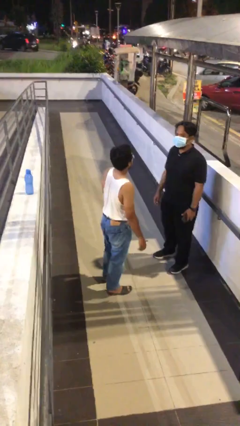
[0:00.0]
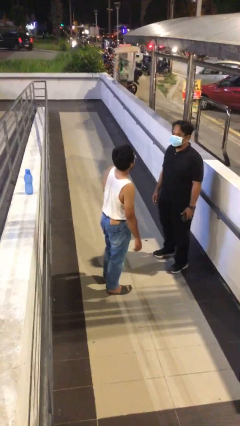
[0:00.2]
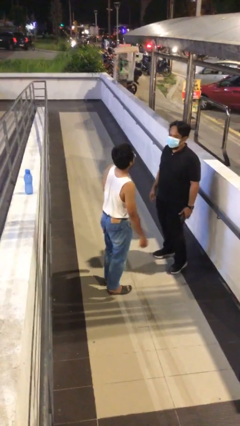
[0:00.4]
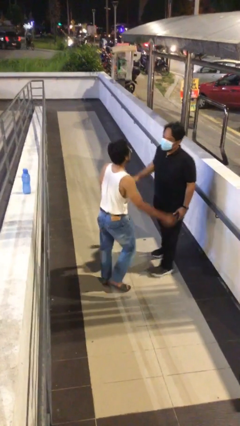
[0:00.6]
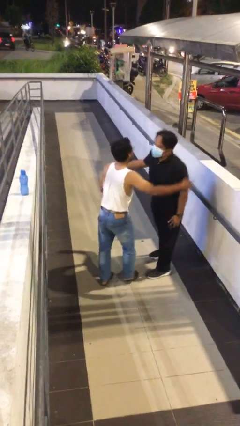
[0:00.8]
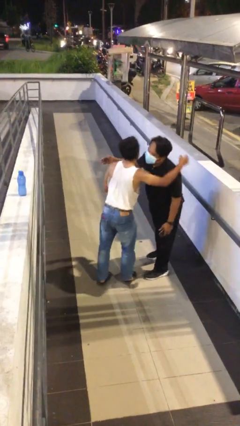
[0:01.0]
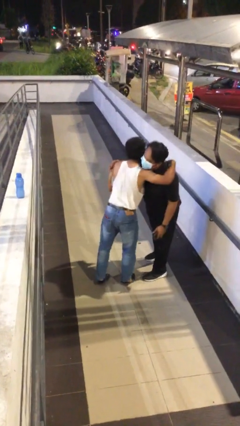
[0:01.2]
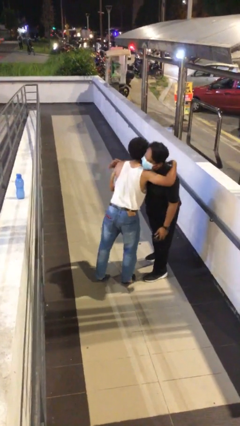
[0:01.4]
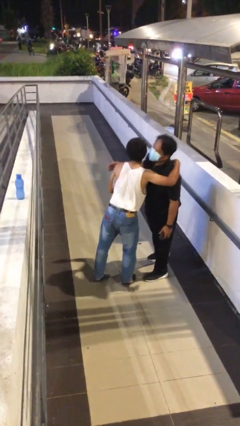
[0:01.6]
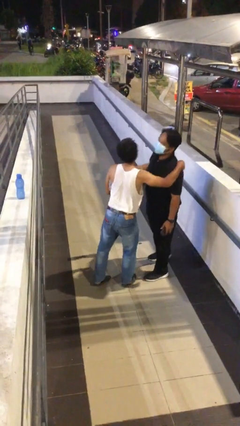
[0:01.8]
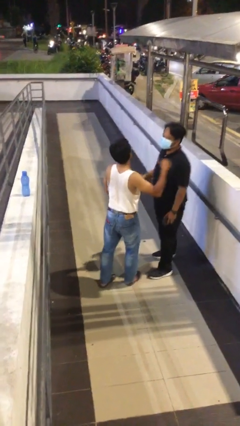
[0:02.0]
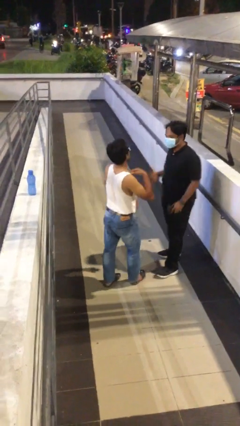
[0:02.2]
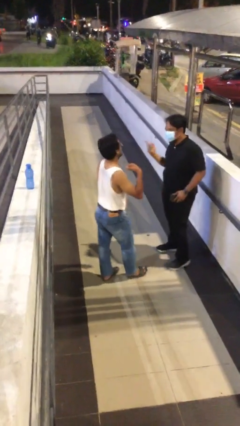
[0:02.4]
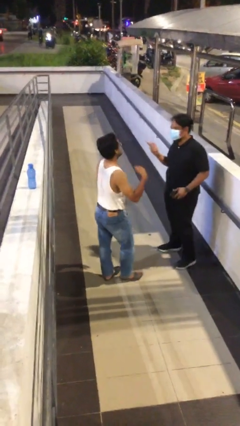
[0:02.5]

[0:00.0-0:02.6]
person embraces person

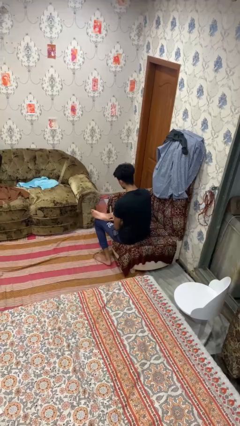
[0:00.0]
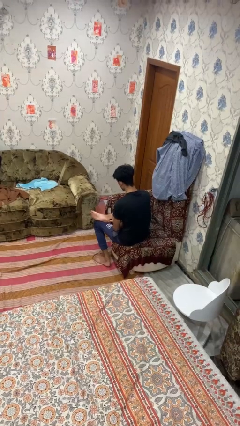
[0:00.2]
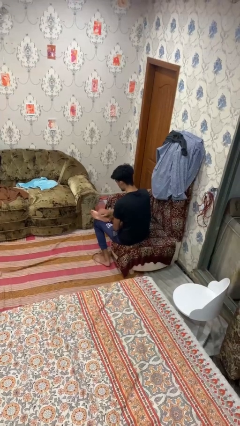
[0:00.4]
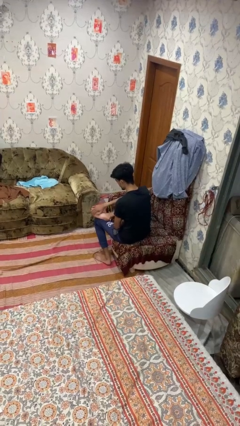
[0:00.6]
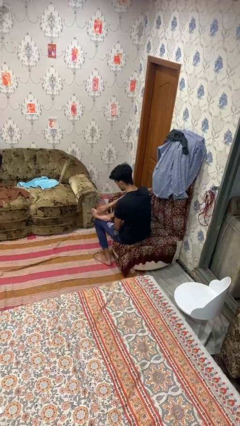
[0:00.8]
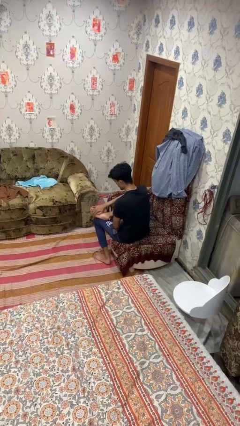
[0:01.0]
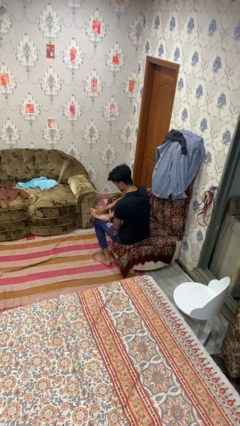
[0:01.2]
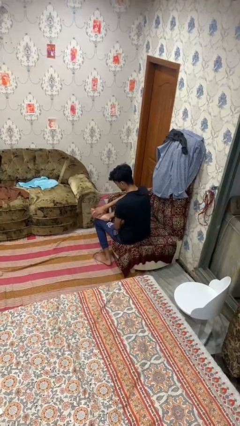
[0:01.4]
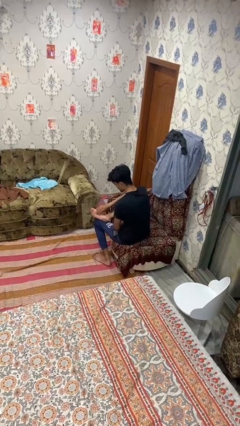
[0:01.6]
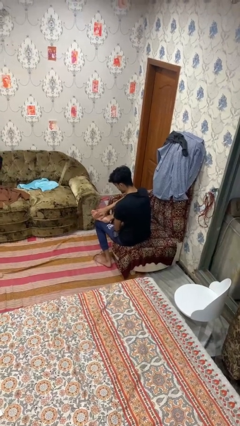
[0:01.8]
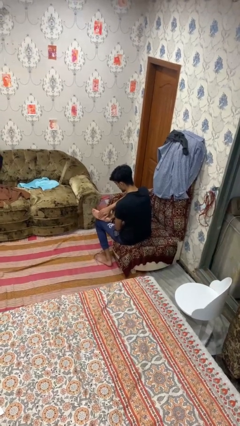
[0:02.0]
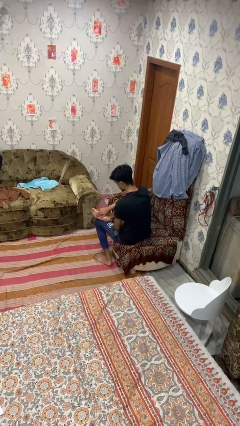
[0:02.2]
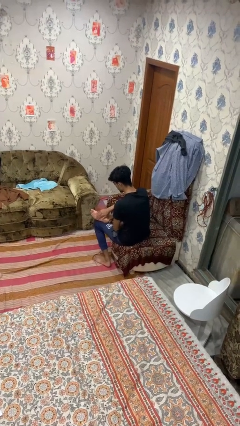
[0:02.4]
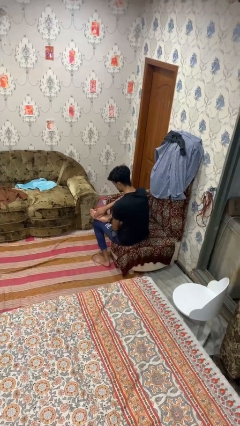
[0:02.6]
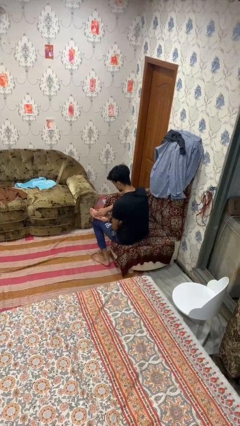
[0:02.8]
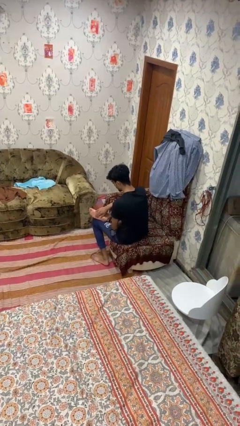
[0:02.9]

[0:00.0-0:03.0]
person rubs foot

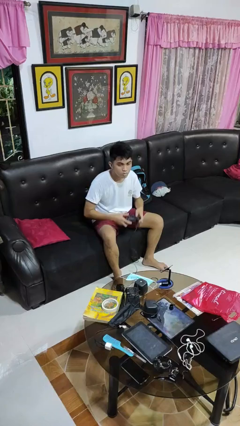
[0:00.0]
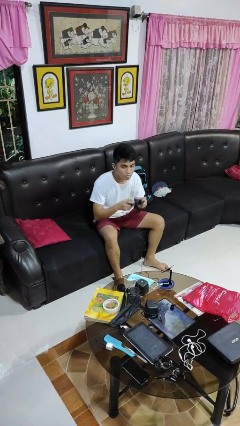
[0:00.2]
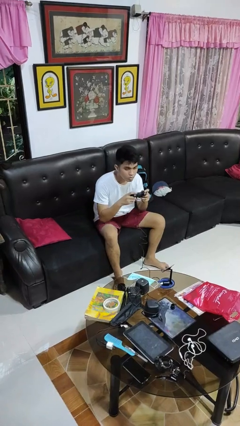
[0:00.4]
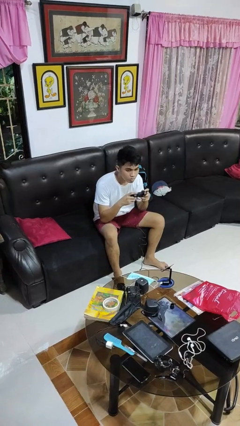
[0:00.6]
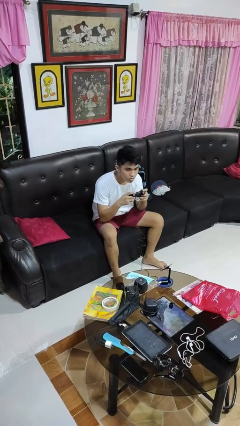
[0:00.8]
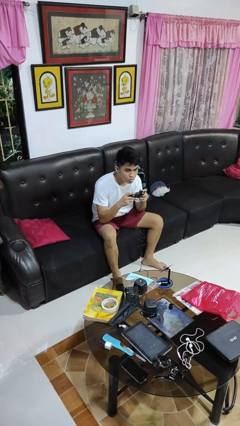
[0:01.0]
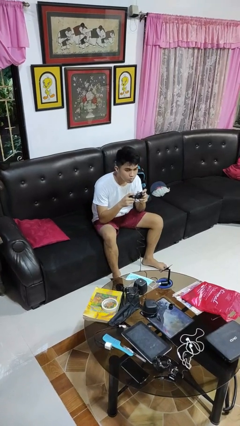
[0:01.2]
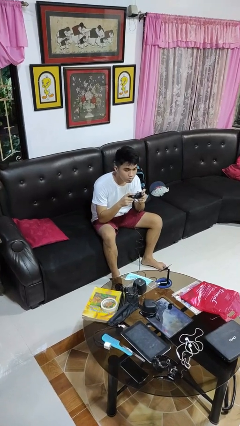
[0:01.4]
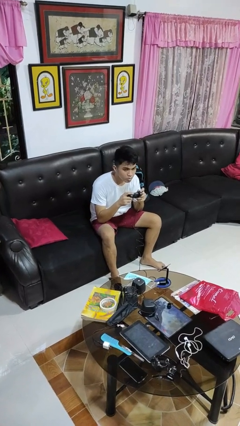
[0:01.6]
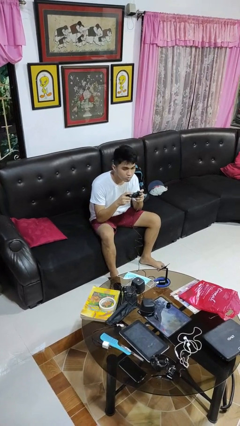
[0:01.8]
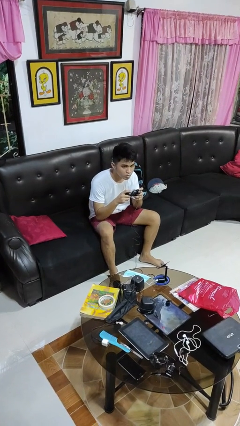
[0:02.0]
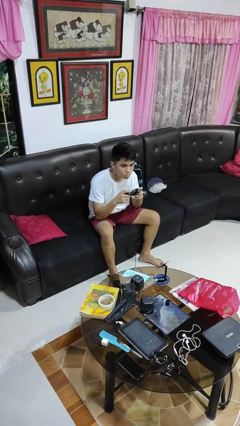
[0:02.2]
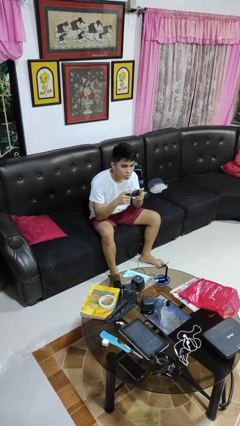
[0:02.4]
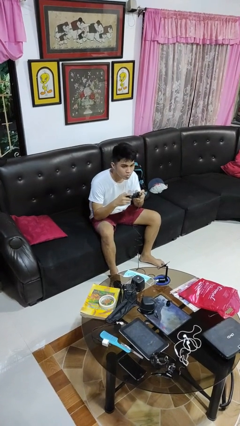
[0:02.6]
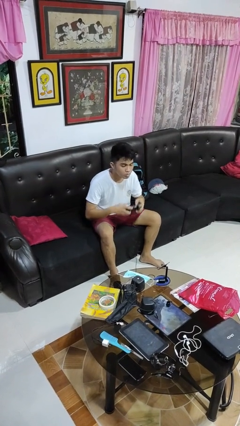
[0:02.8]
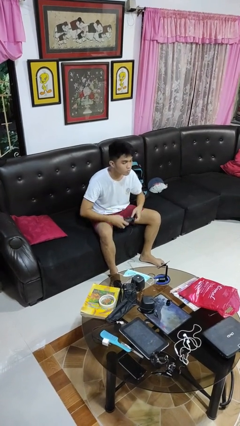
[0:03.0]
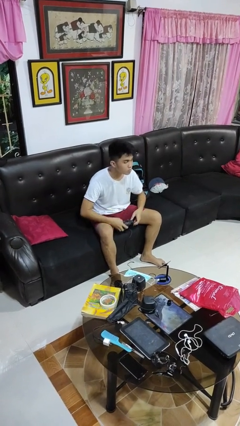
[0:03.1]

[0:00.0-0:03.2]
person interacts with handheld game

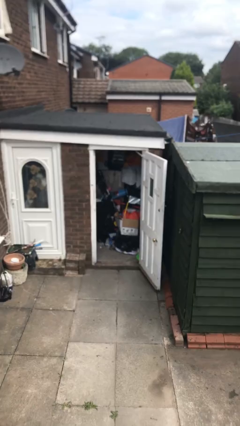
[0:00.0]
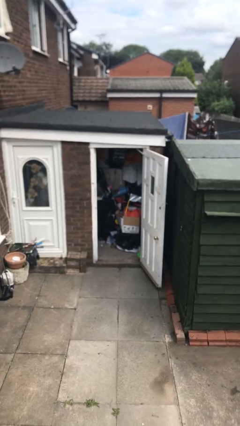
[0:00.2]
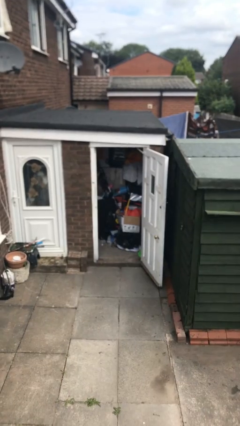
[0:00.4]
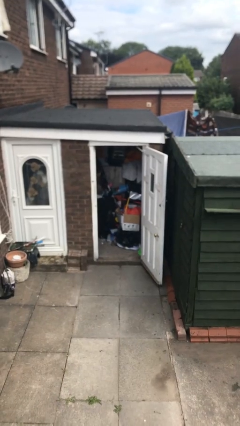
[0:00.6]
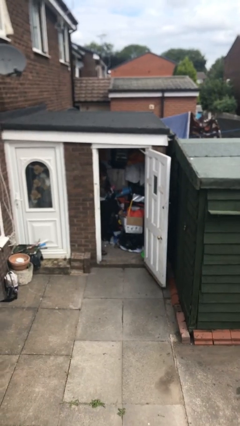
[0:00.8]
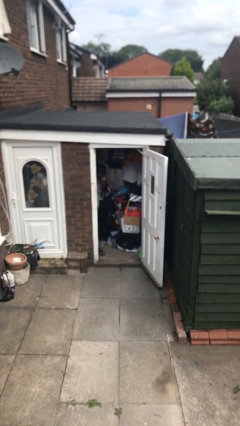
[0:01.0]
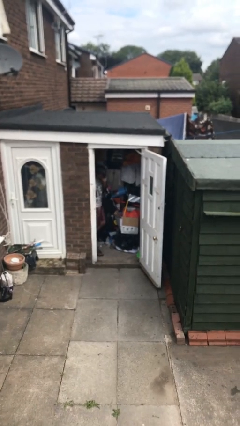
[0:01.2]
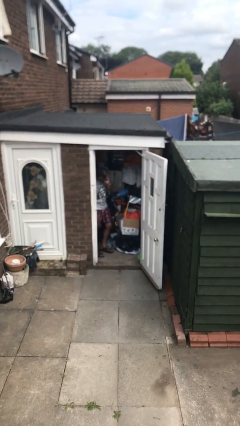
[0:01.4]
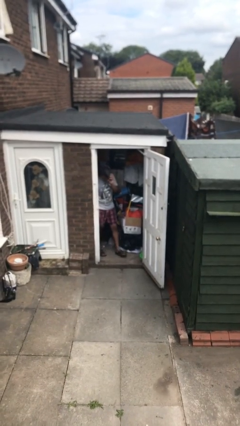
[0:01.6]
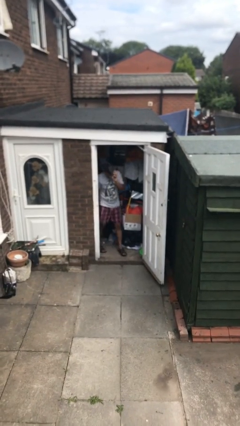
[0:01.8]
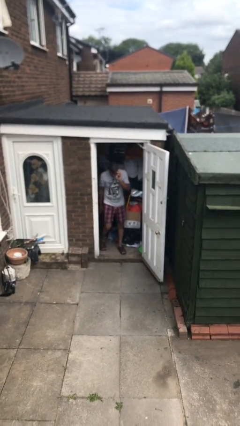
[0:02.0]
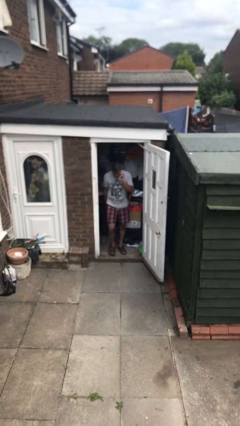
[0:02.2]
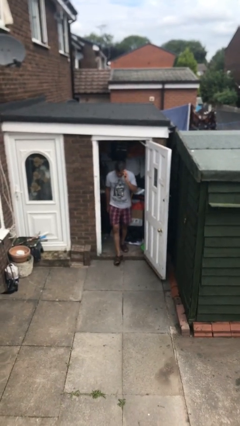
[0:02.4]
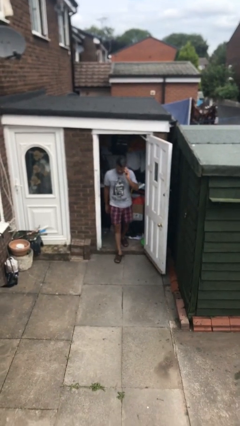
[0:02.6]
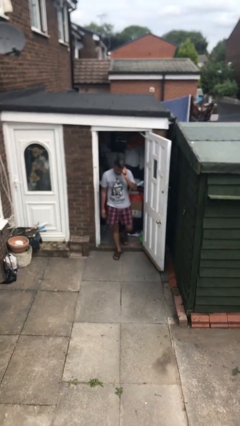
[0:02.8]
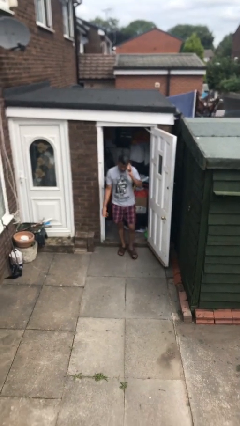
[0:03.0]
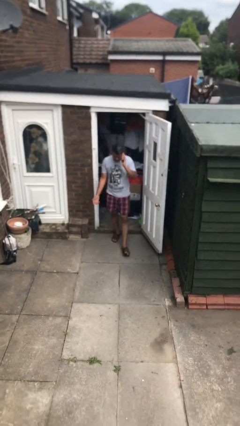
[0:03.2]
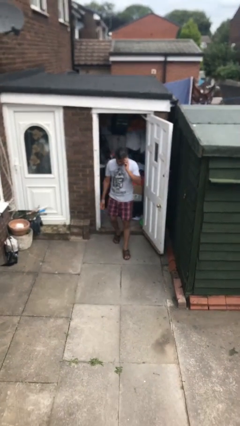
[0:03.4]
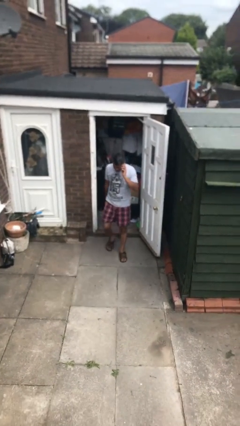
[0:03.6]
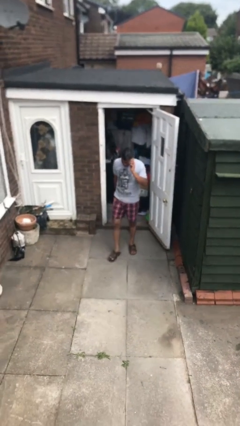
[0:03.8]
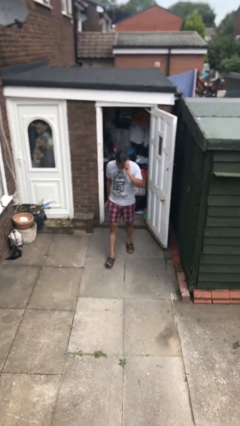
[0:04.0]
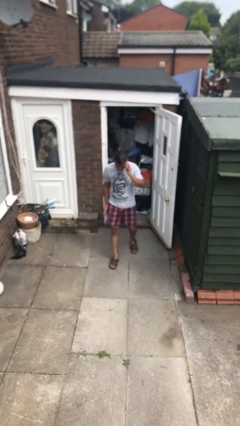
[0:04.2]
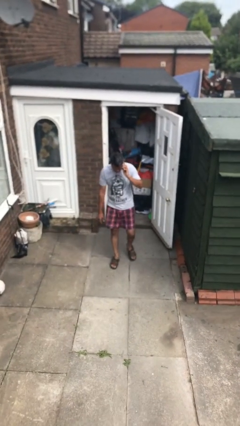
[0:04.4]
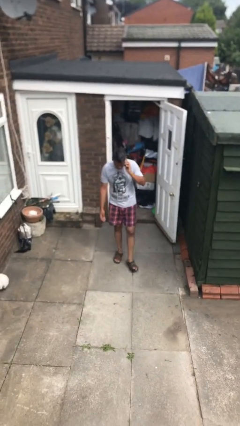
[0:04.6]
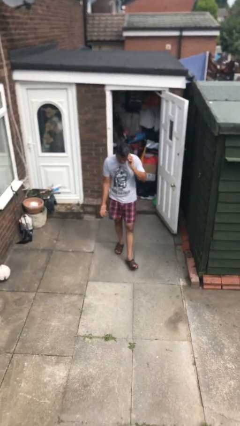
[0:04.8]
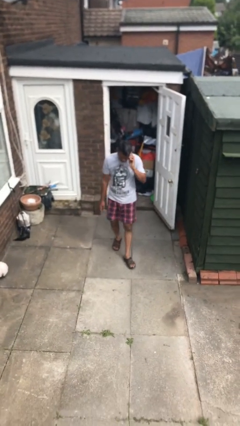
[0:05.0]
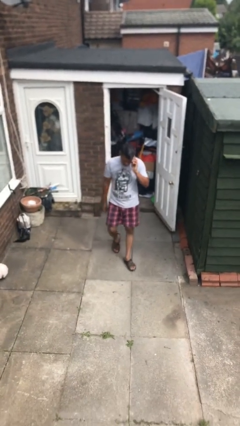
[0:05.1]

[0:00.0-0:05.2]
person enters scene through structure

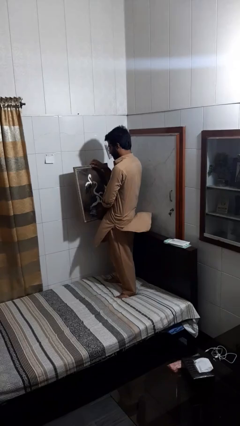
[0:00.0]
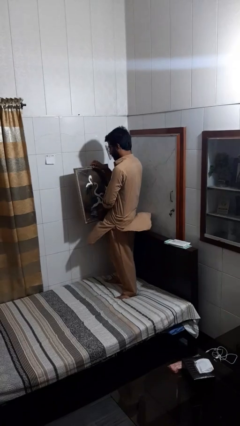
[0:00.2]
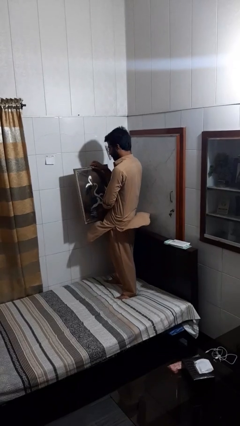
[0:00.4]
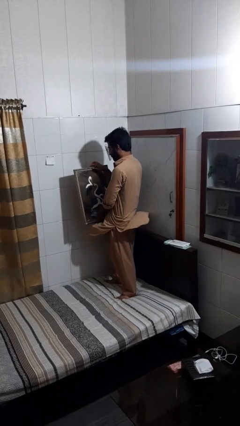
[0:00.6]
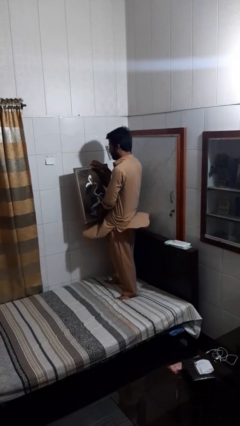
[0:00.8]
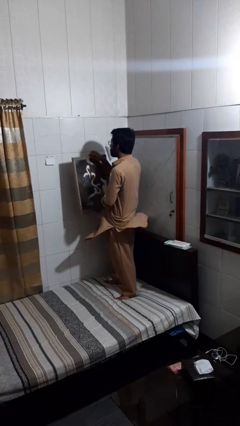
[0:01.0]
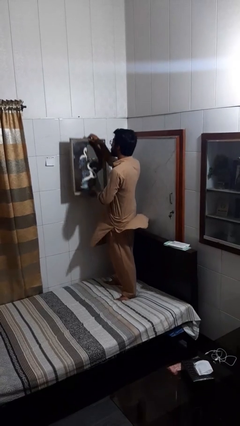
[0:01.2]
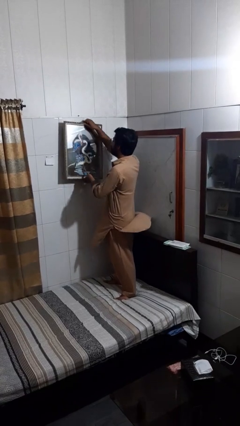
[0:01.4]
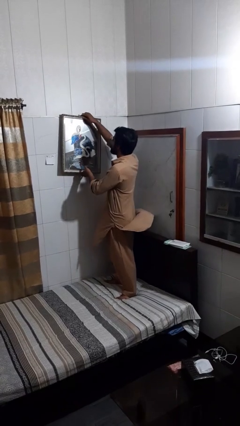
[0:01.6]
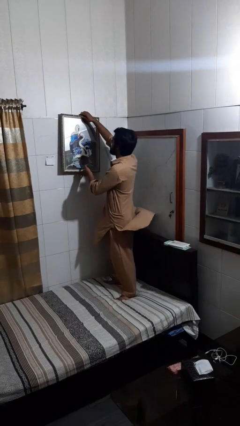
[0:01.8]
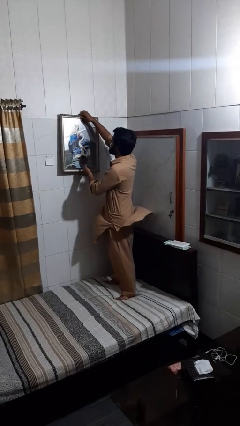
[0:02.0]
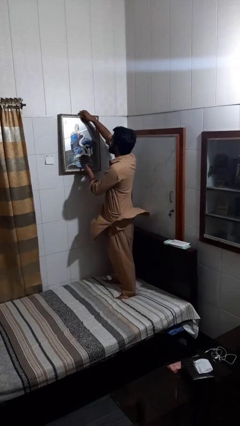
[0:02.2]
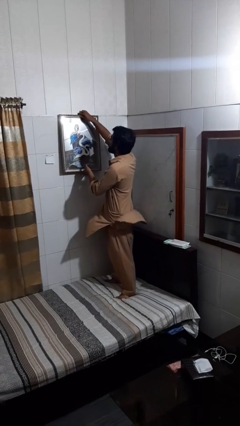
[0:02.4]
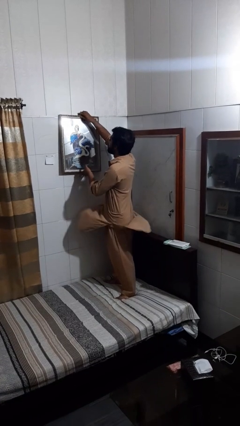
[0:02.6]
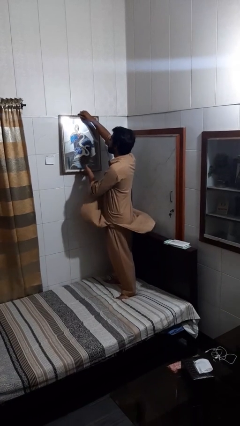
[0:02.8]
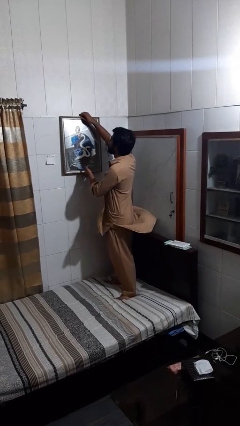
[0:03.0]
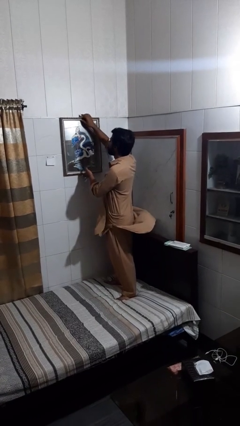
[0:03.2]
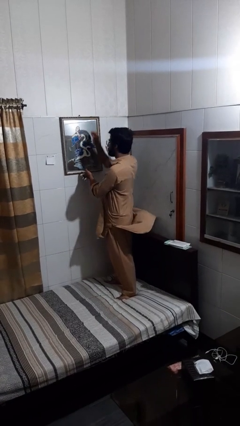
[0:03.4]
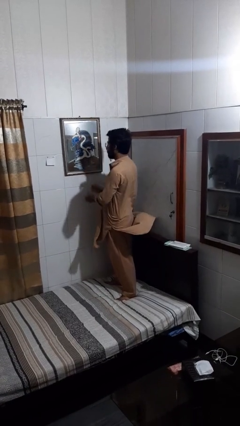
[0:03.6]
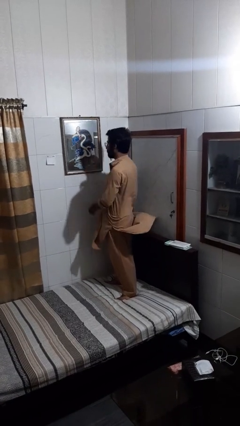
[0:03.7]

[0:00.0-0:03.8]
person puts up picture frame
